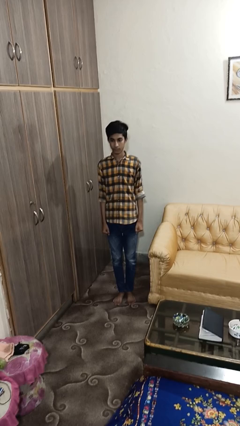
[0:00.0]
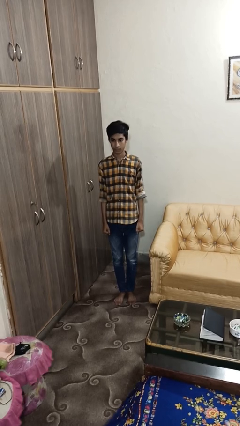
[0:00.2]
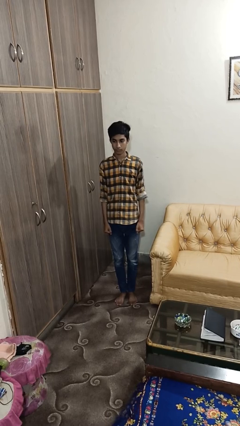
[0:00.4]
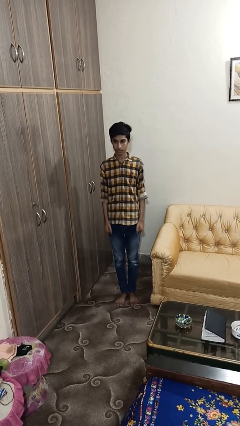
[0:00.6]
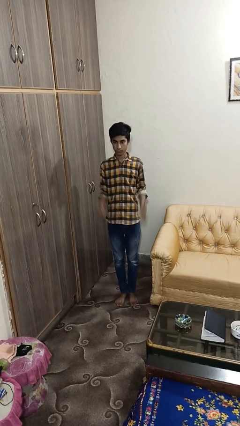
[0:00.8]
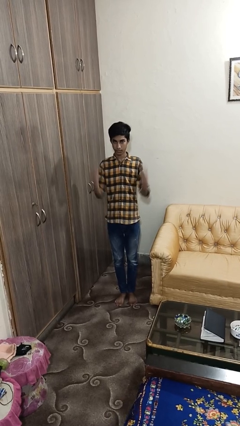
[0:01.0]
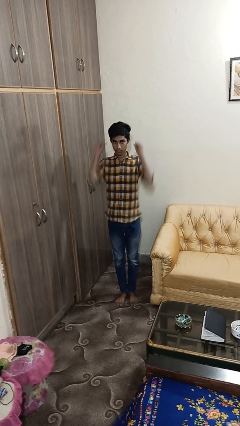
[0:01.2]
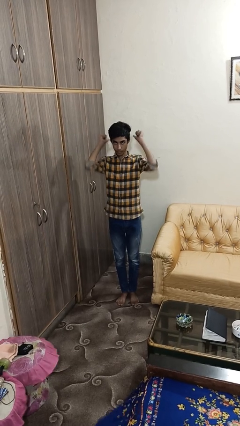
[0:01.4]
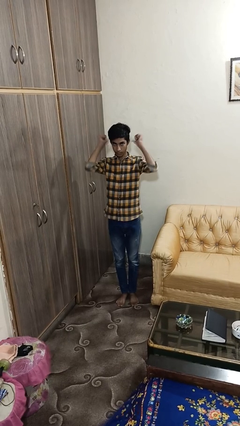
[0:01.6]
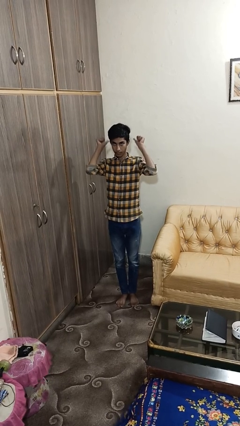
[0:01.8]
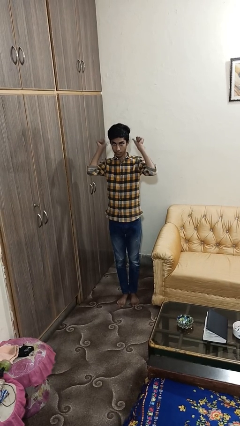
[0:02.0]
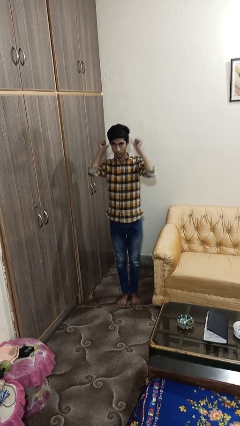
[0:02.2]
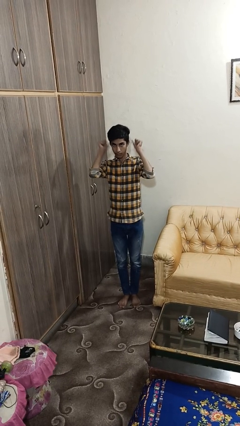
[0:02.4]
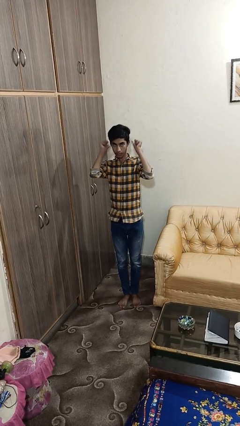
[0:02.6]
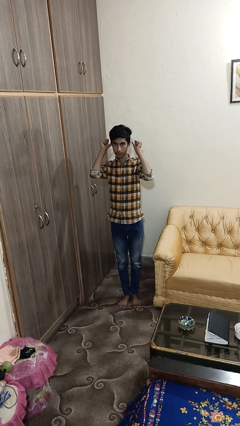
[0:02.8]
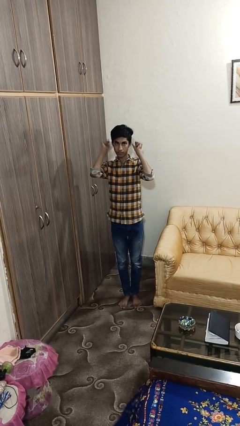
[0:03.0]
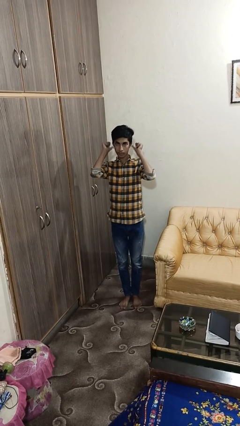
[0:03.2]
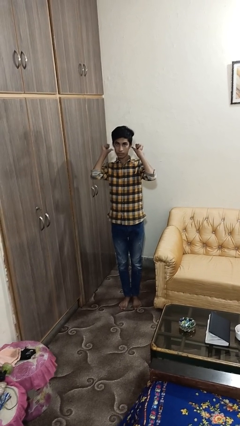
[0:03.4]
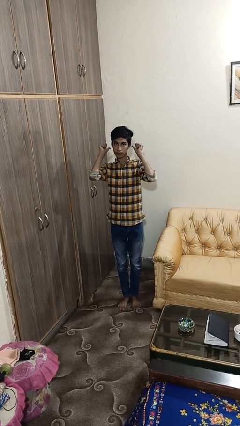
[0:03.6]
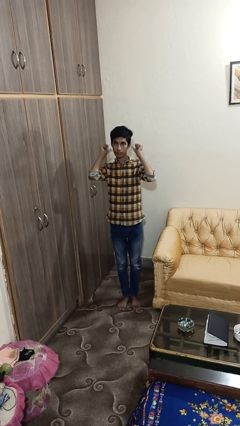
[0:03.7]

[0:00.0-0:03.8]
person gestures behind me

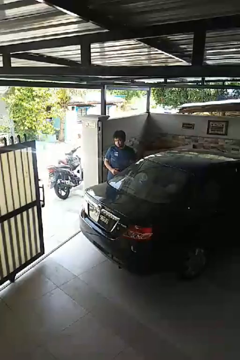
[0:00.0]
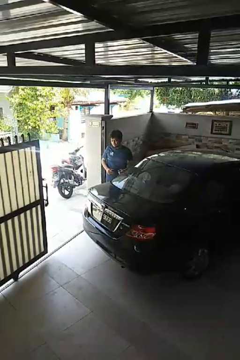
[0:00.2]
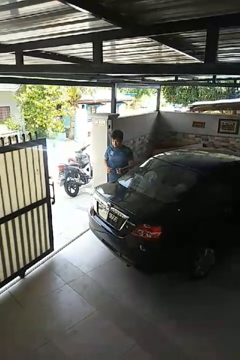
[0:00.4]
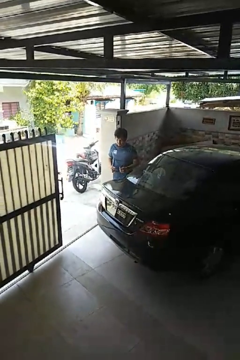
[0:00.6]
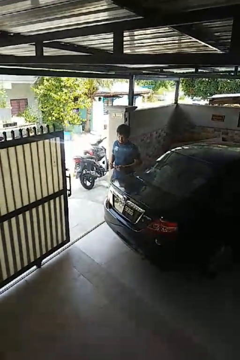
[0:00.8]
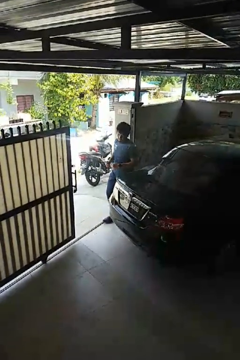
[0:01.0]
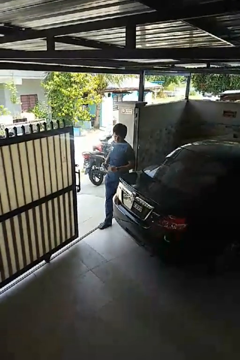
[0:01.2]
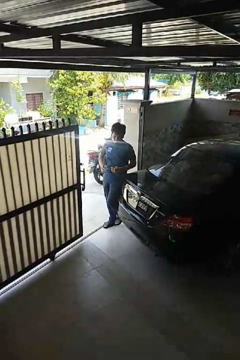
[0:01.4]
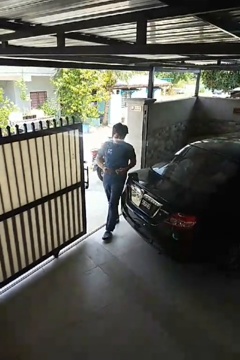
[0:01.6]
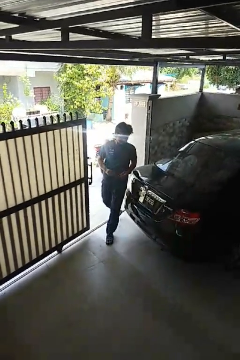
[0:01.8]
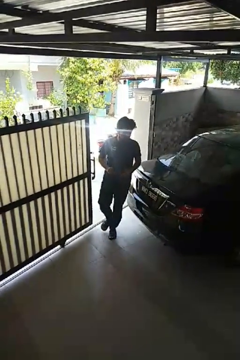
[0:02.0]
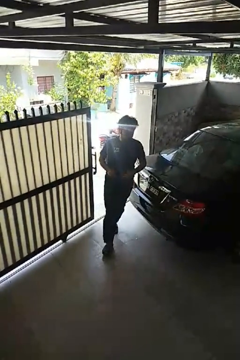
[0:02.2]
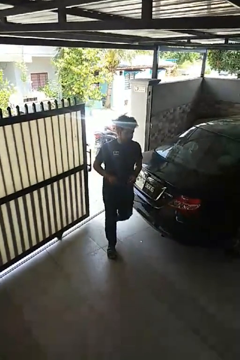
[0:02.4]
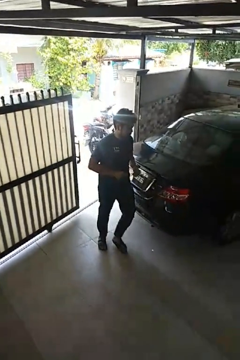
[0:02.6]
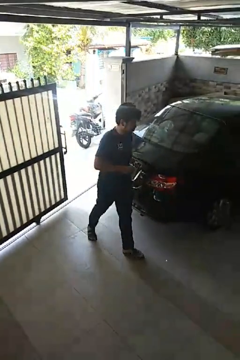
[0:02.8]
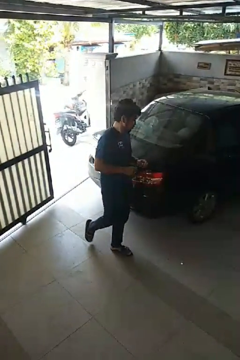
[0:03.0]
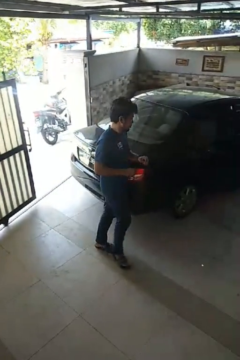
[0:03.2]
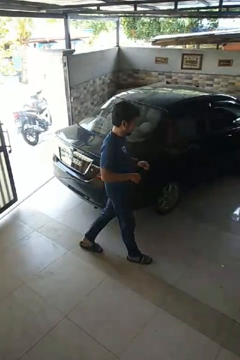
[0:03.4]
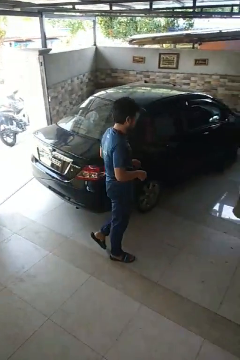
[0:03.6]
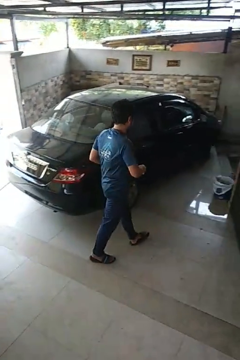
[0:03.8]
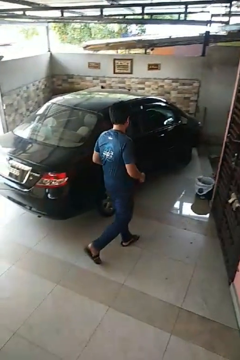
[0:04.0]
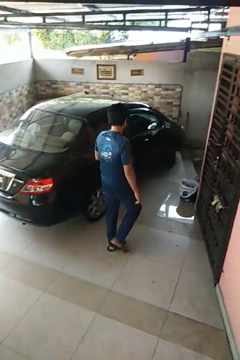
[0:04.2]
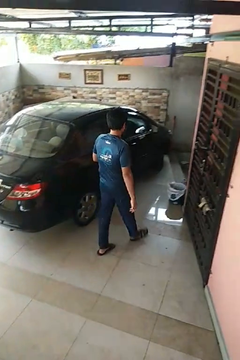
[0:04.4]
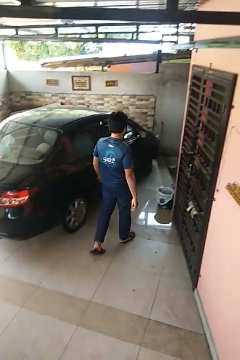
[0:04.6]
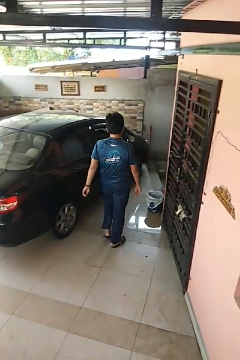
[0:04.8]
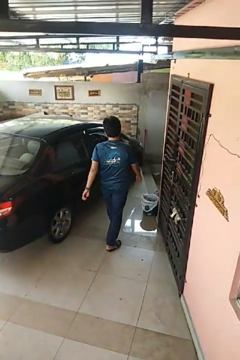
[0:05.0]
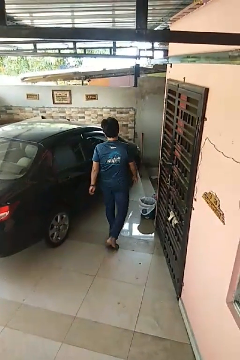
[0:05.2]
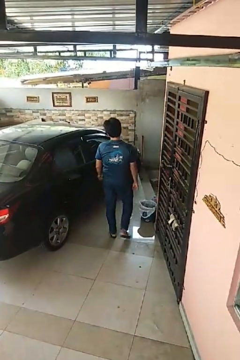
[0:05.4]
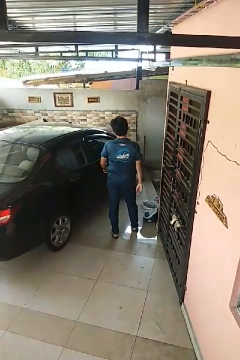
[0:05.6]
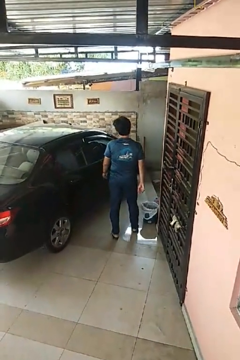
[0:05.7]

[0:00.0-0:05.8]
person walks around car

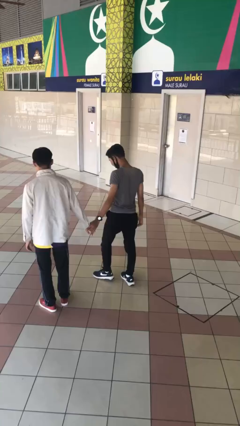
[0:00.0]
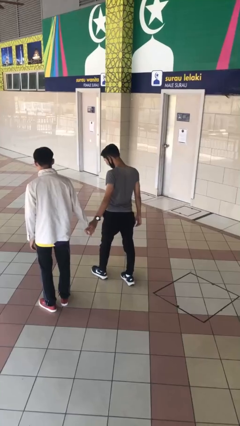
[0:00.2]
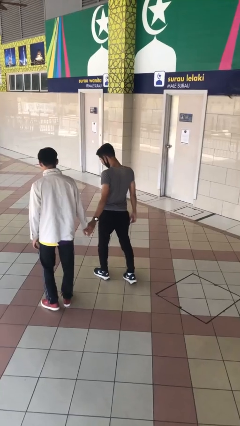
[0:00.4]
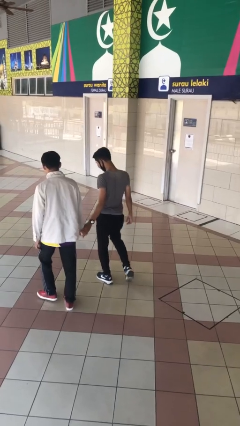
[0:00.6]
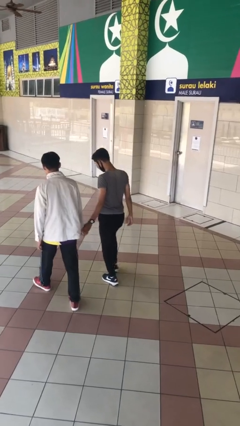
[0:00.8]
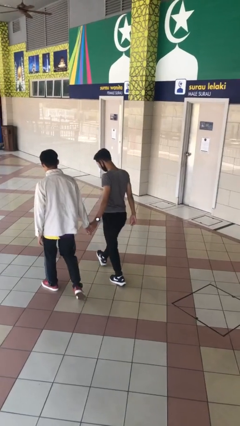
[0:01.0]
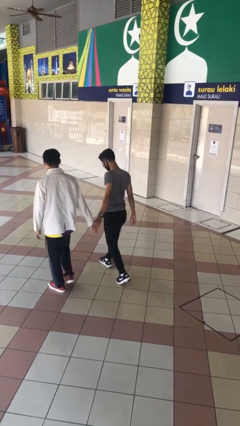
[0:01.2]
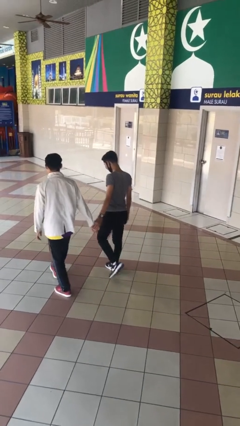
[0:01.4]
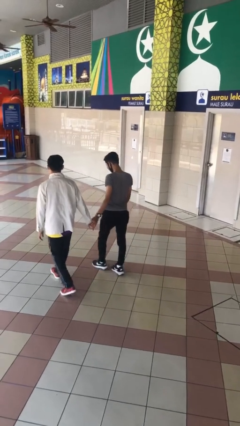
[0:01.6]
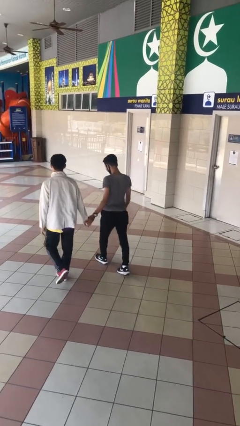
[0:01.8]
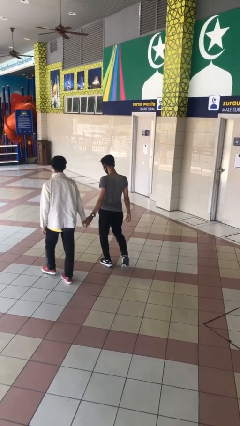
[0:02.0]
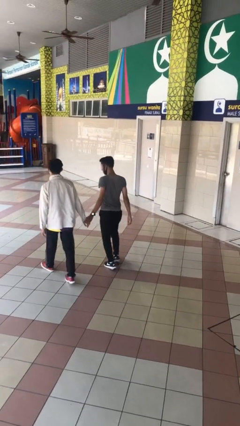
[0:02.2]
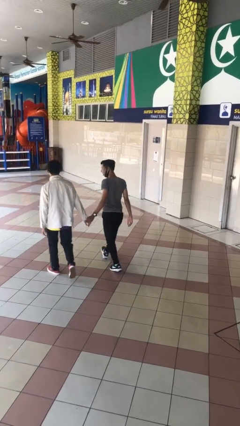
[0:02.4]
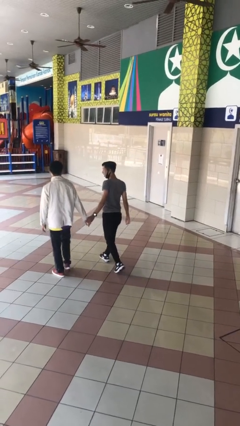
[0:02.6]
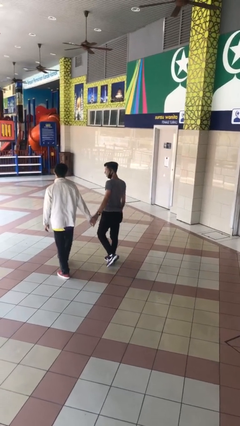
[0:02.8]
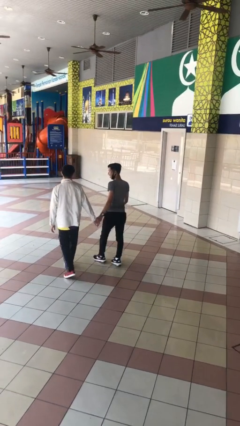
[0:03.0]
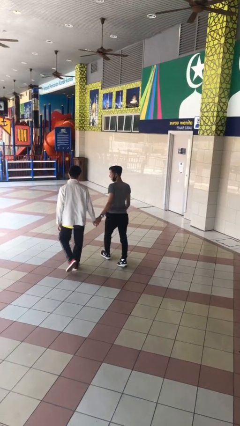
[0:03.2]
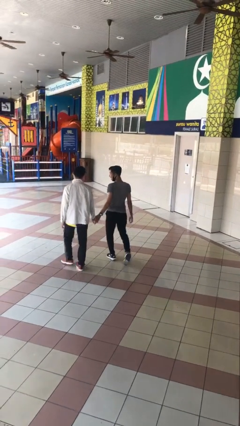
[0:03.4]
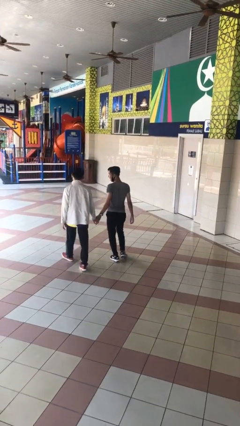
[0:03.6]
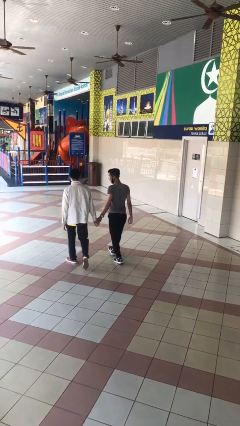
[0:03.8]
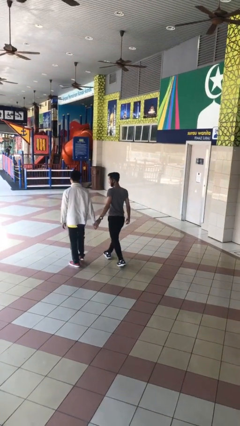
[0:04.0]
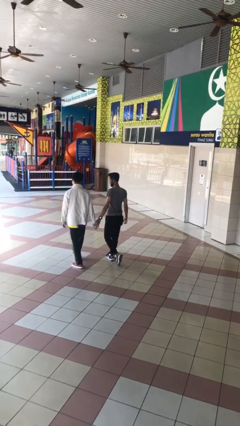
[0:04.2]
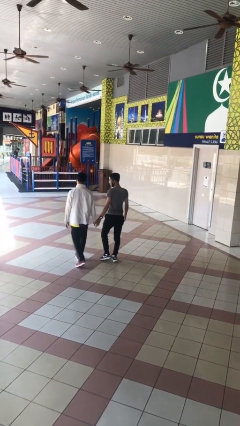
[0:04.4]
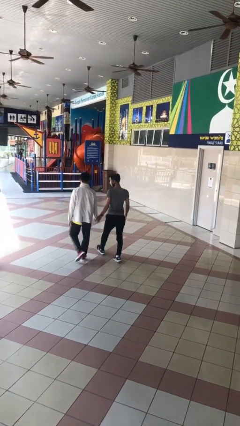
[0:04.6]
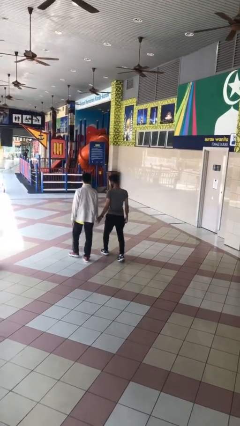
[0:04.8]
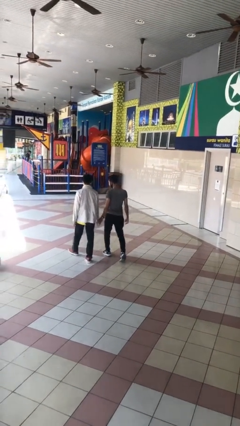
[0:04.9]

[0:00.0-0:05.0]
person holds hand

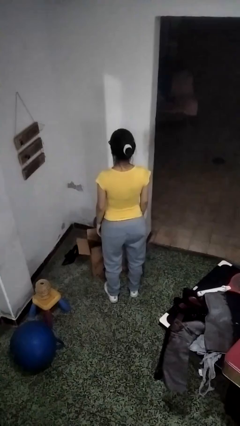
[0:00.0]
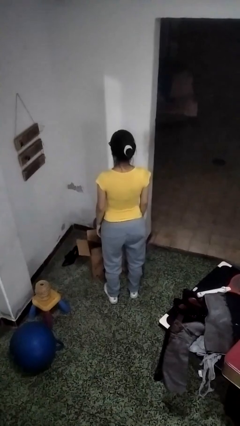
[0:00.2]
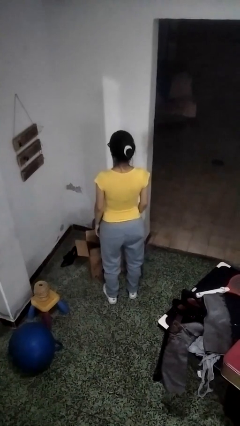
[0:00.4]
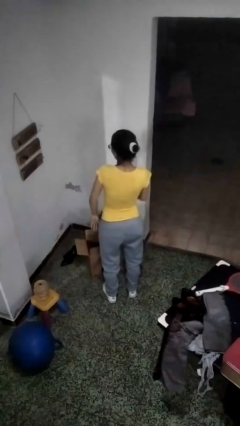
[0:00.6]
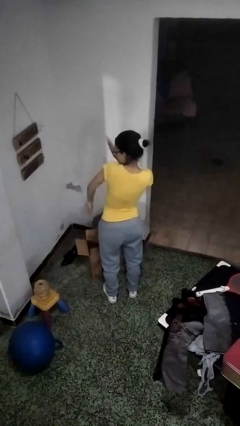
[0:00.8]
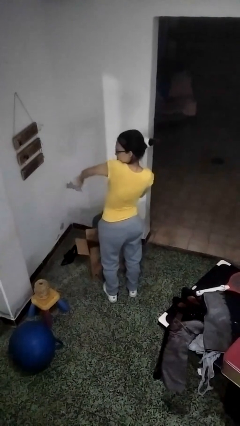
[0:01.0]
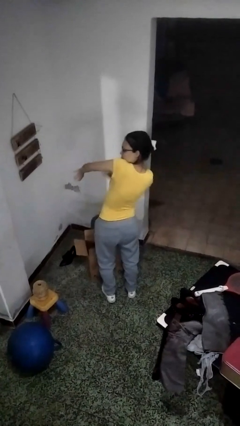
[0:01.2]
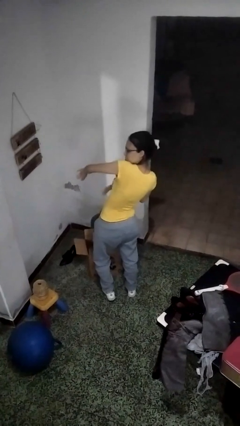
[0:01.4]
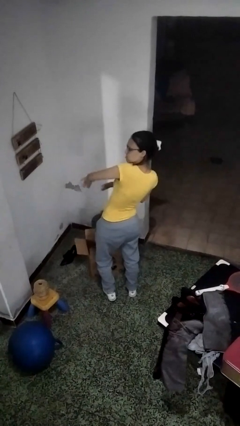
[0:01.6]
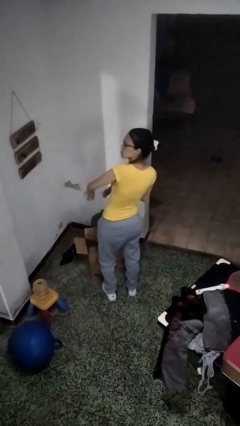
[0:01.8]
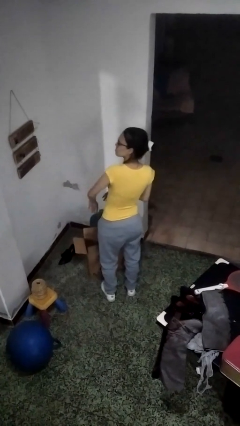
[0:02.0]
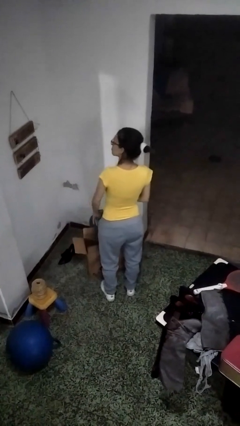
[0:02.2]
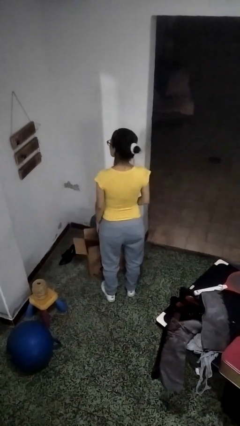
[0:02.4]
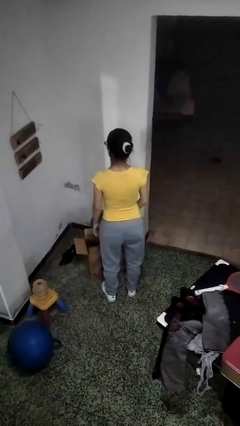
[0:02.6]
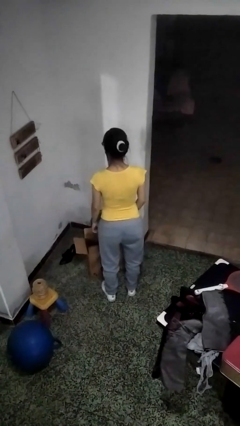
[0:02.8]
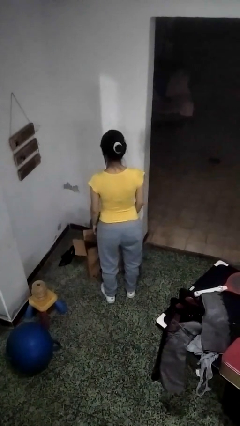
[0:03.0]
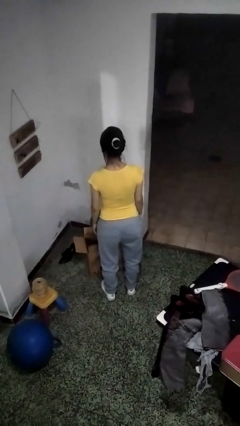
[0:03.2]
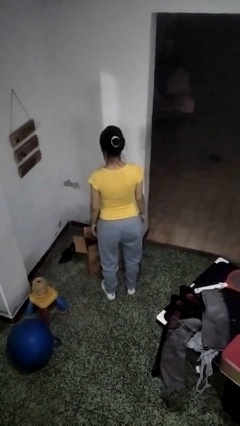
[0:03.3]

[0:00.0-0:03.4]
person swats bug

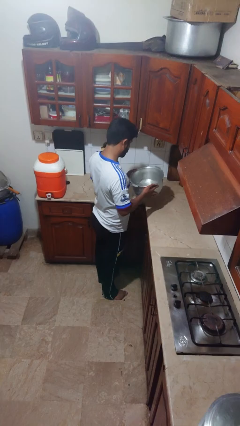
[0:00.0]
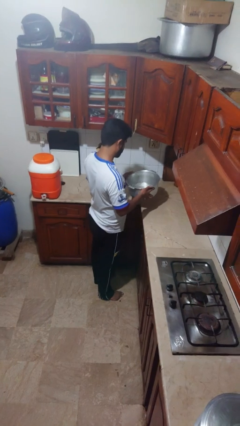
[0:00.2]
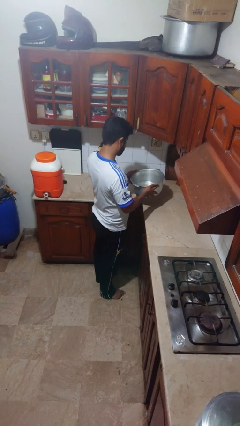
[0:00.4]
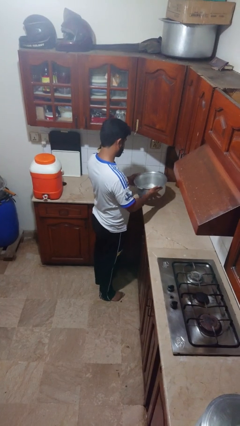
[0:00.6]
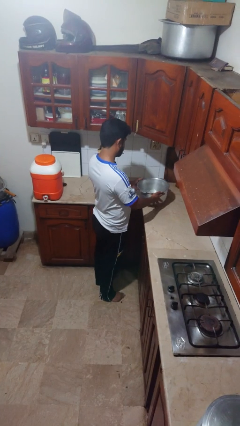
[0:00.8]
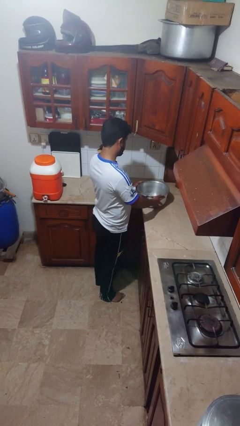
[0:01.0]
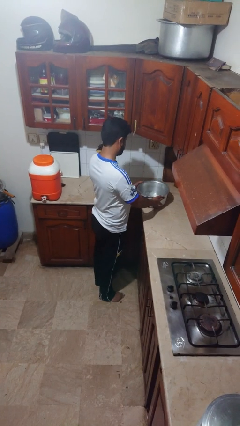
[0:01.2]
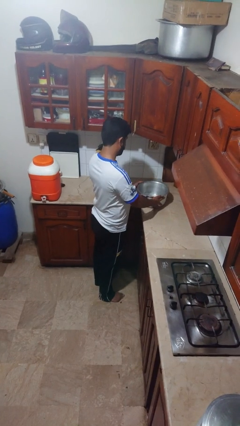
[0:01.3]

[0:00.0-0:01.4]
person puts down object on countertop
